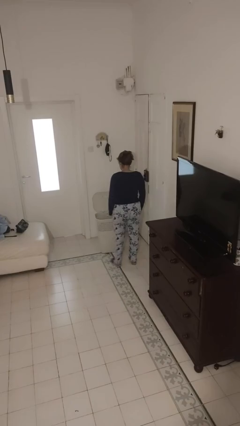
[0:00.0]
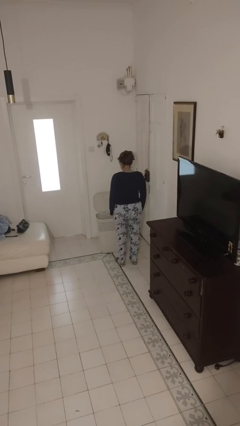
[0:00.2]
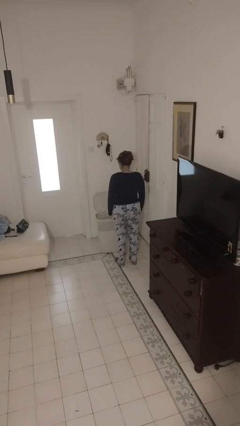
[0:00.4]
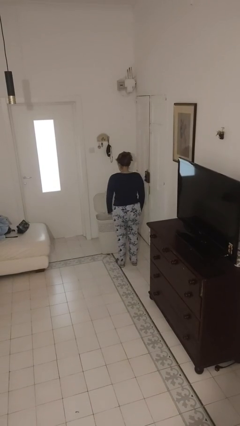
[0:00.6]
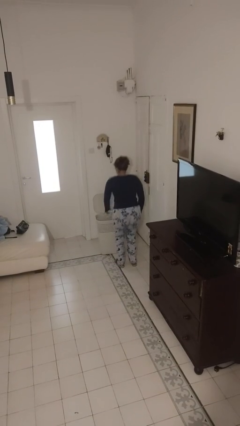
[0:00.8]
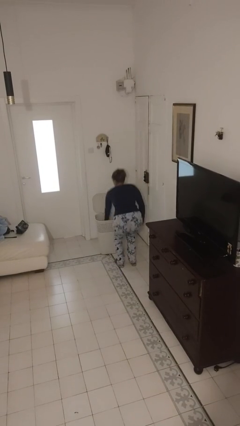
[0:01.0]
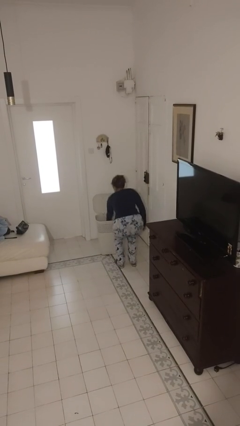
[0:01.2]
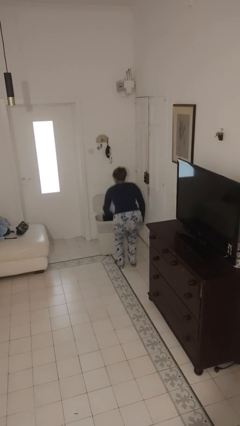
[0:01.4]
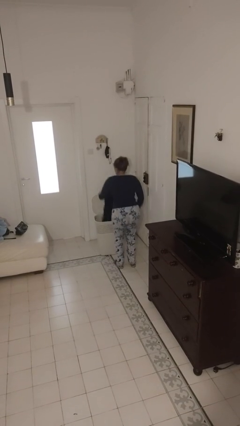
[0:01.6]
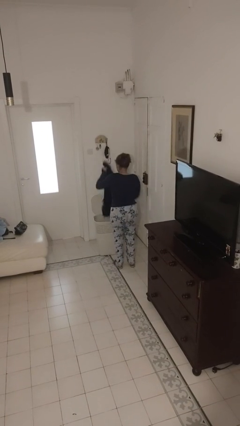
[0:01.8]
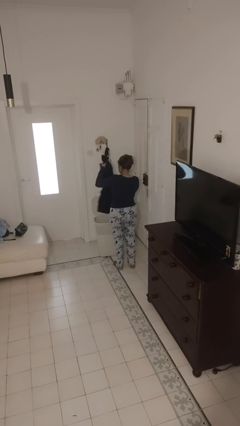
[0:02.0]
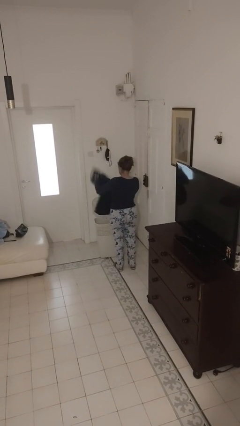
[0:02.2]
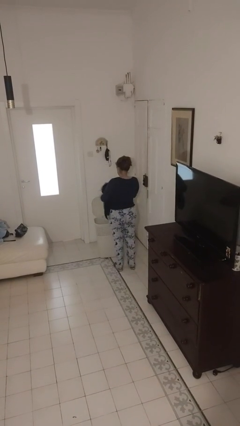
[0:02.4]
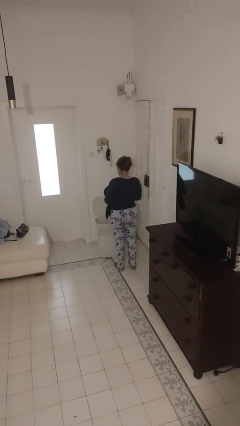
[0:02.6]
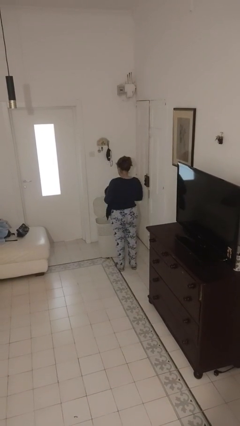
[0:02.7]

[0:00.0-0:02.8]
person takes object from basket

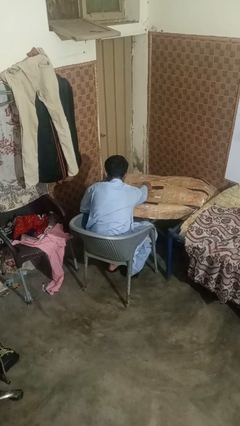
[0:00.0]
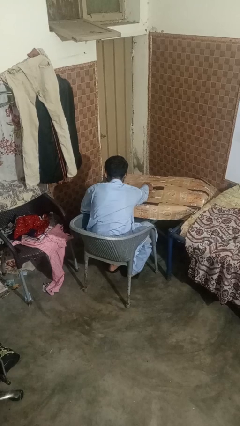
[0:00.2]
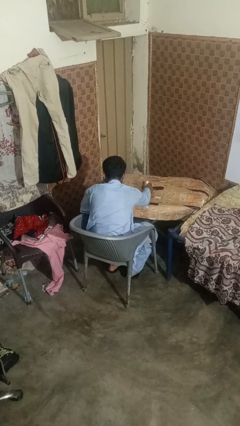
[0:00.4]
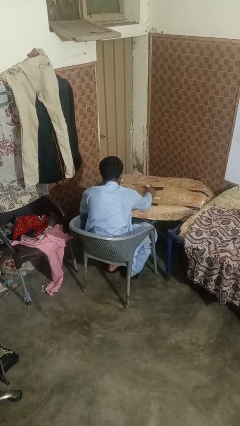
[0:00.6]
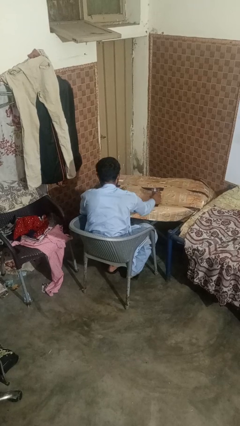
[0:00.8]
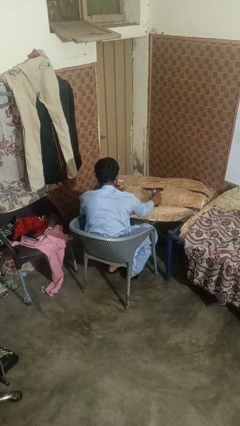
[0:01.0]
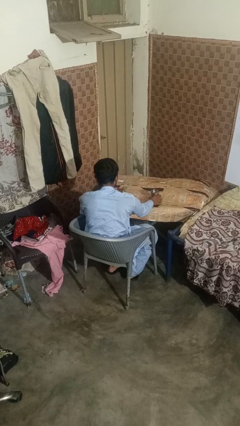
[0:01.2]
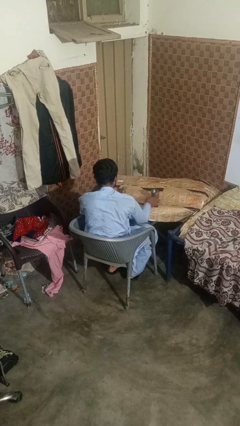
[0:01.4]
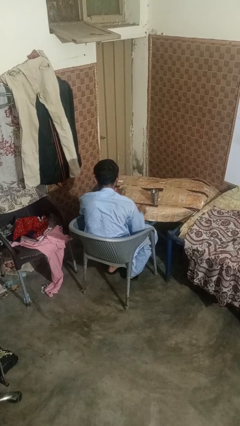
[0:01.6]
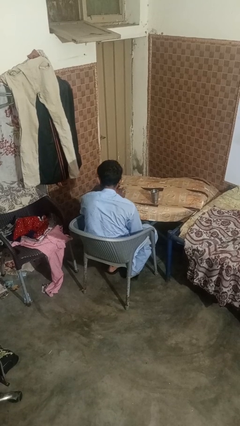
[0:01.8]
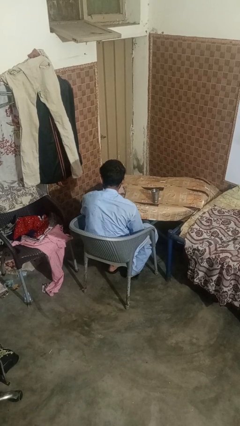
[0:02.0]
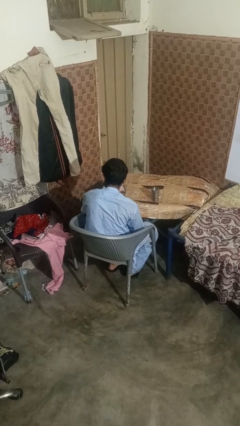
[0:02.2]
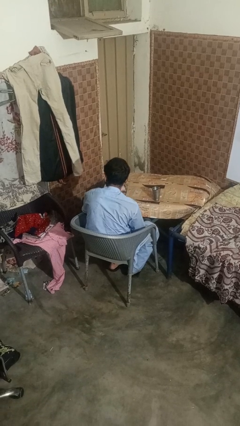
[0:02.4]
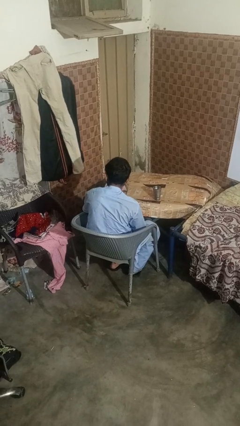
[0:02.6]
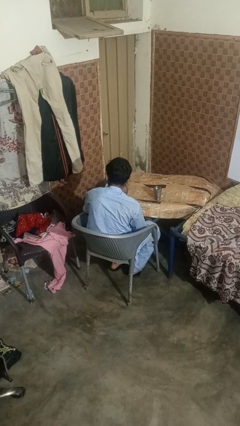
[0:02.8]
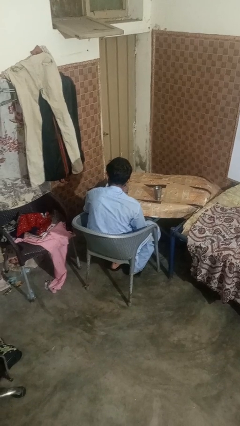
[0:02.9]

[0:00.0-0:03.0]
person sets upright glass

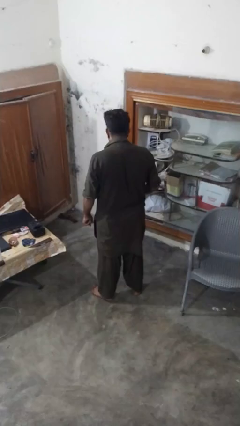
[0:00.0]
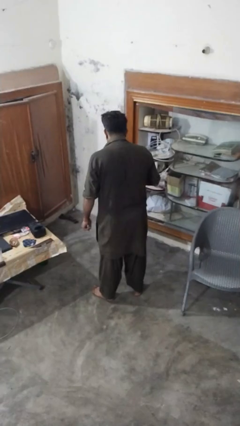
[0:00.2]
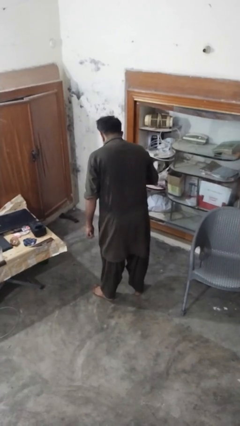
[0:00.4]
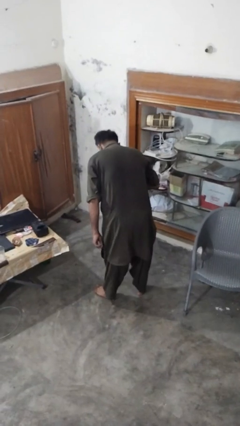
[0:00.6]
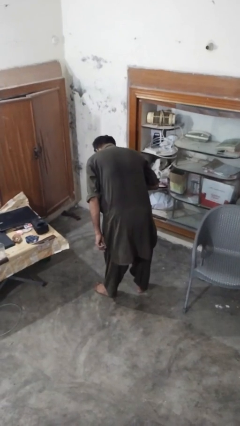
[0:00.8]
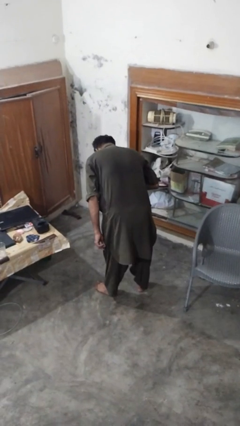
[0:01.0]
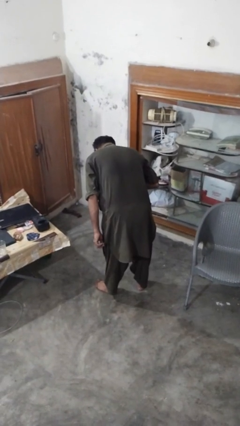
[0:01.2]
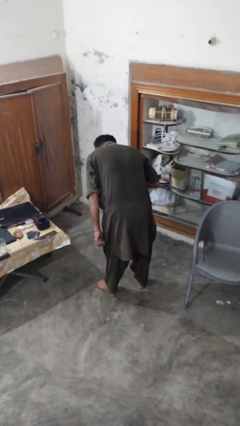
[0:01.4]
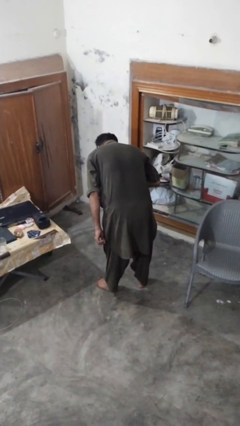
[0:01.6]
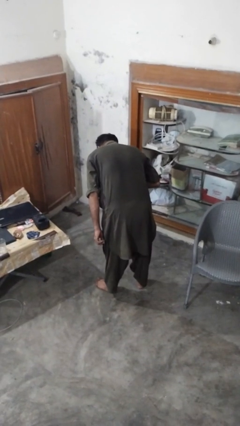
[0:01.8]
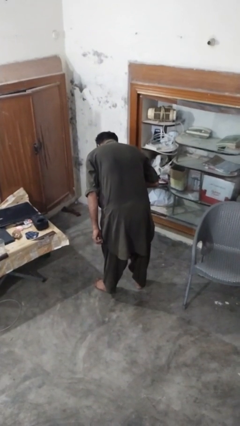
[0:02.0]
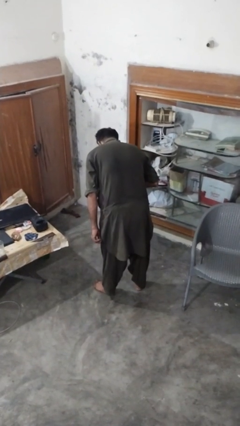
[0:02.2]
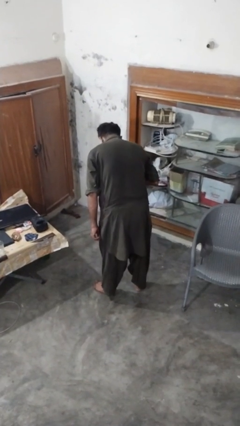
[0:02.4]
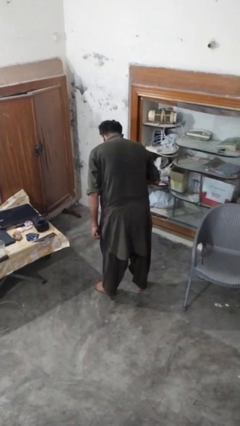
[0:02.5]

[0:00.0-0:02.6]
person bows

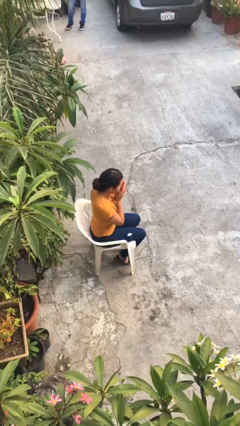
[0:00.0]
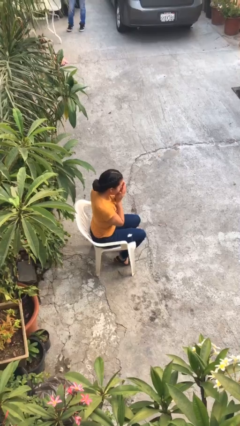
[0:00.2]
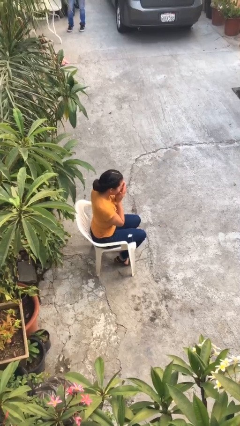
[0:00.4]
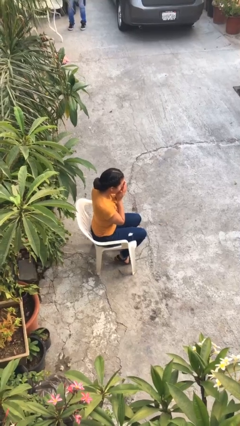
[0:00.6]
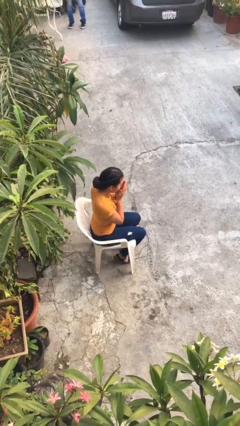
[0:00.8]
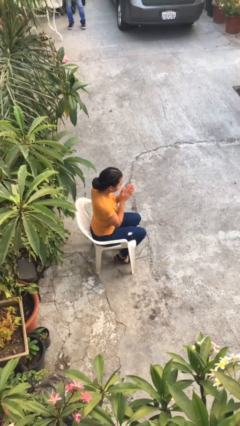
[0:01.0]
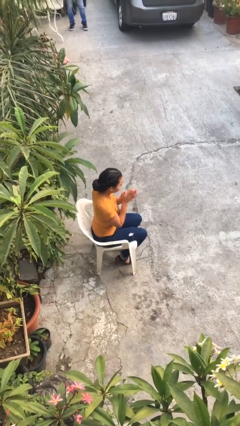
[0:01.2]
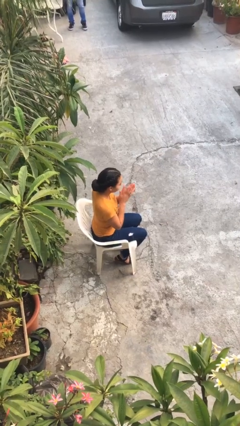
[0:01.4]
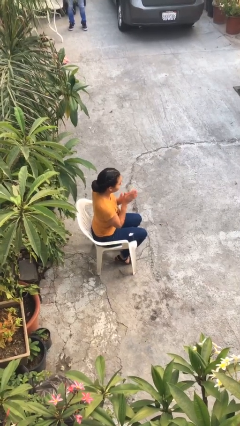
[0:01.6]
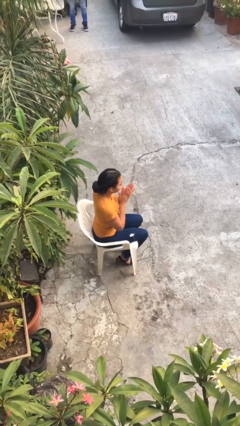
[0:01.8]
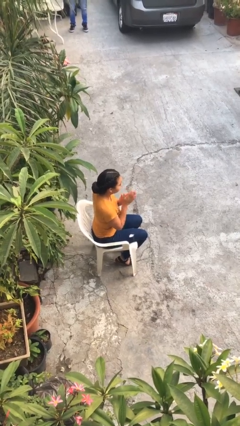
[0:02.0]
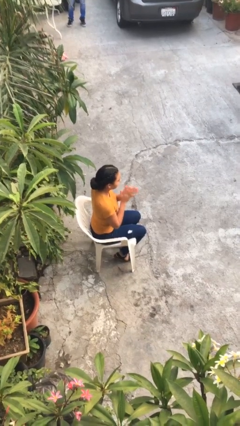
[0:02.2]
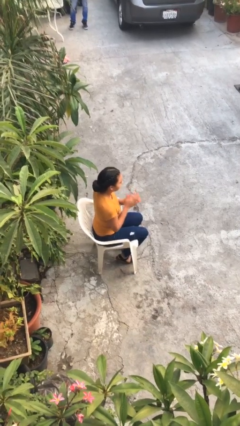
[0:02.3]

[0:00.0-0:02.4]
person blows into hands

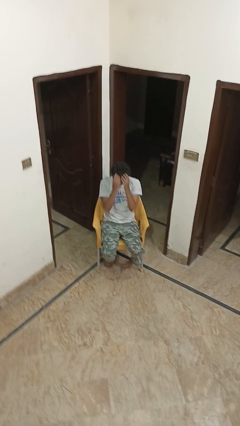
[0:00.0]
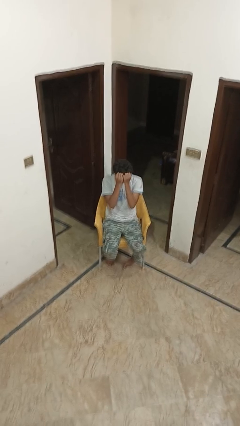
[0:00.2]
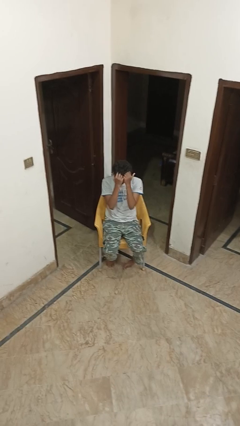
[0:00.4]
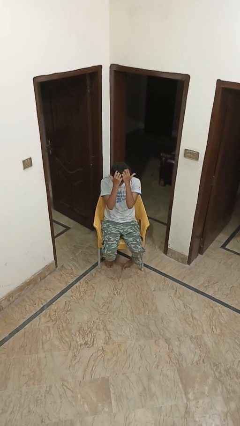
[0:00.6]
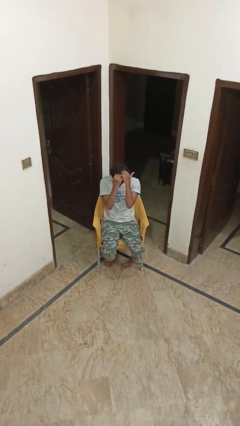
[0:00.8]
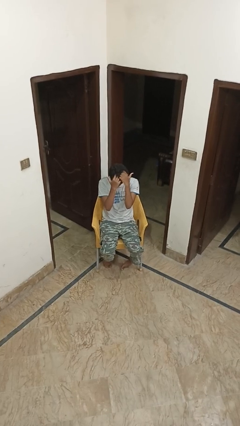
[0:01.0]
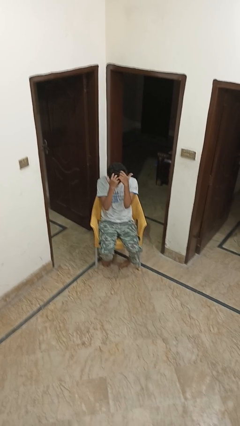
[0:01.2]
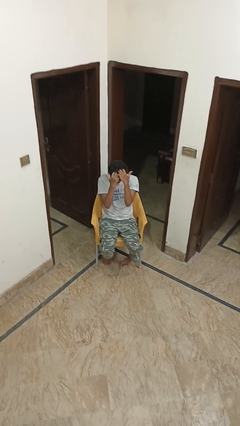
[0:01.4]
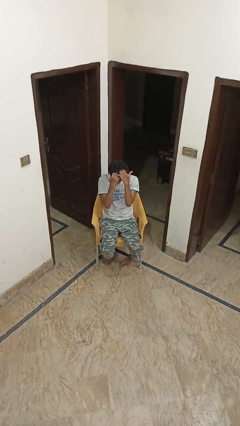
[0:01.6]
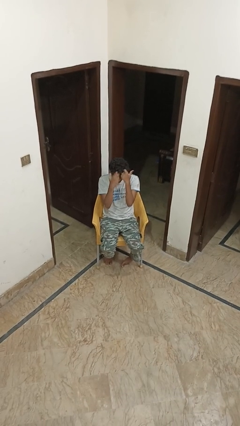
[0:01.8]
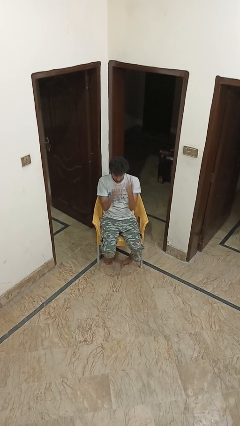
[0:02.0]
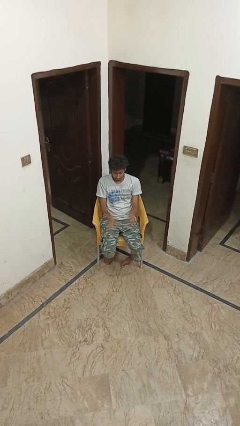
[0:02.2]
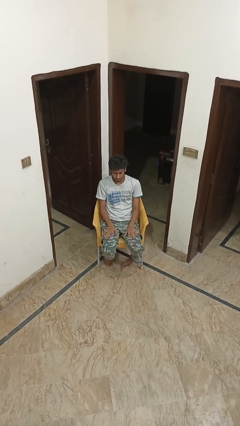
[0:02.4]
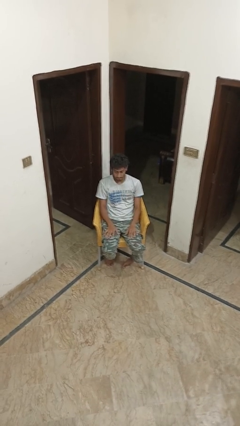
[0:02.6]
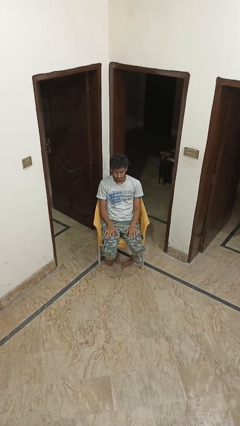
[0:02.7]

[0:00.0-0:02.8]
person scratches face

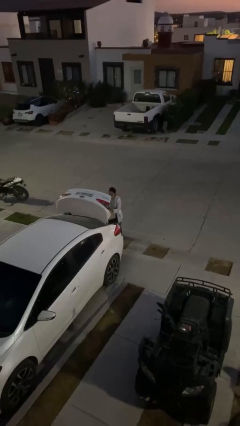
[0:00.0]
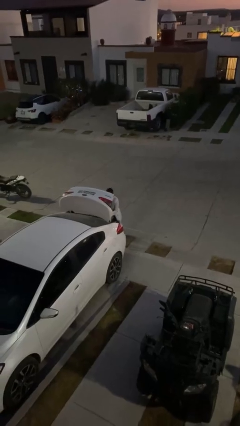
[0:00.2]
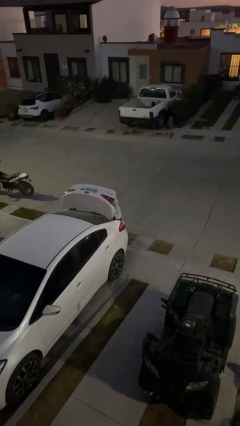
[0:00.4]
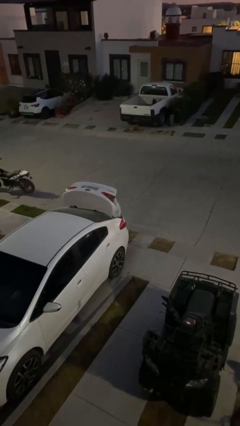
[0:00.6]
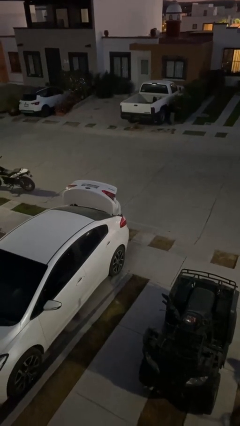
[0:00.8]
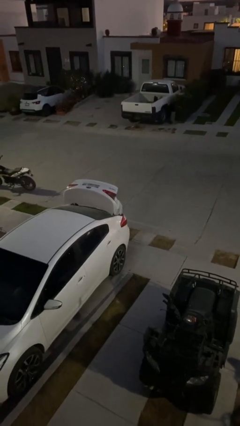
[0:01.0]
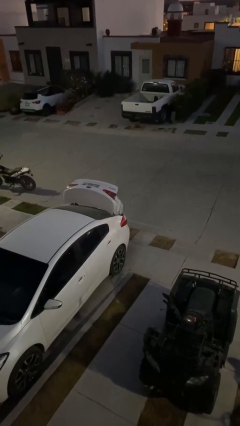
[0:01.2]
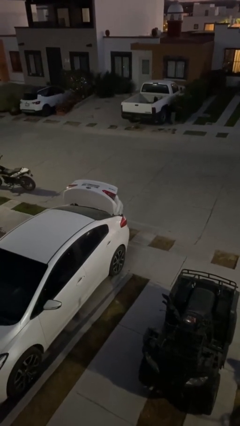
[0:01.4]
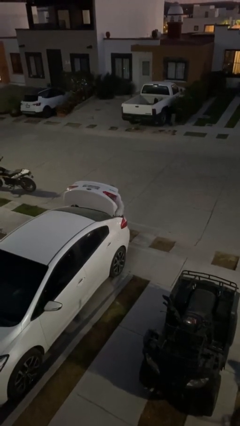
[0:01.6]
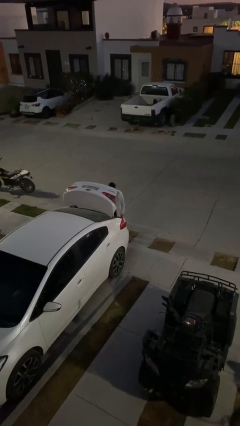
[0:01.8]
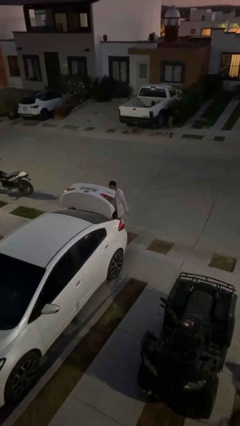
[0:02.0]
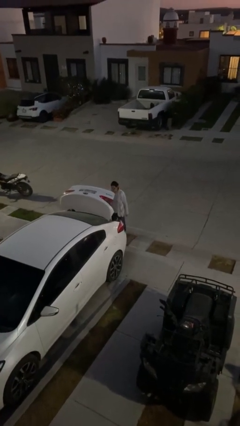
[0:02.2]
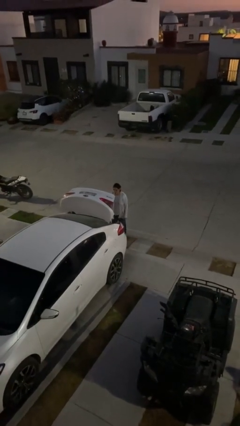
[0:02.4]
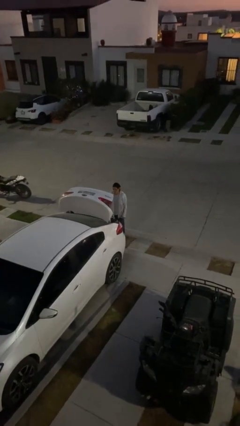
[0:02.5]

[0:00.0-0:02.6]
person loads car

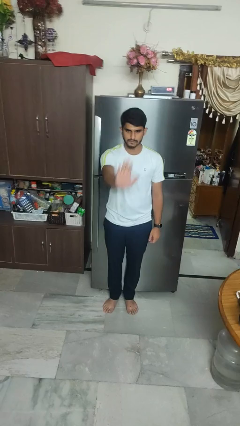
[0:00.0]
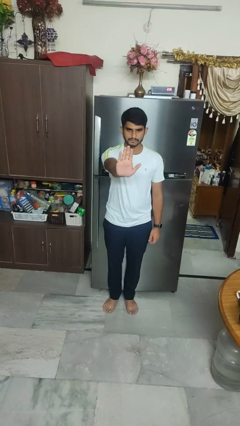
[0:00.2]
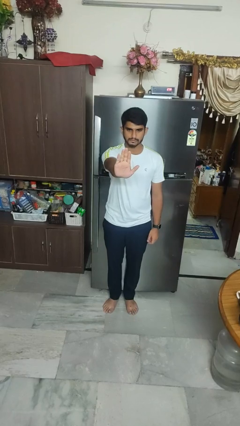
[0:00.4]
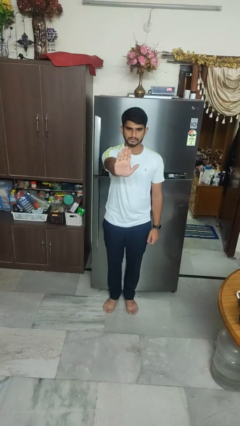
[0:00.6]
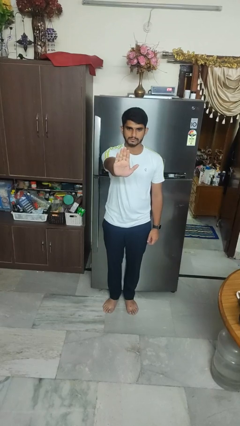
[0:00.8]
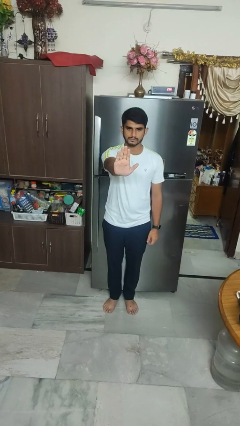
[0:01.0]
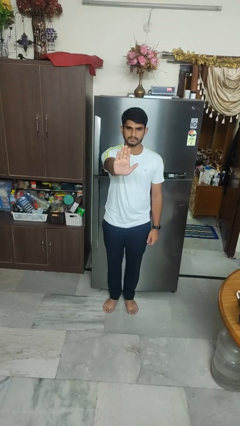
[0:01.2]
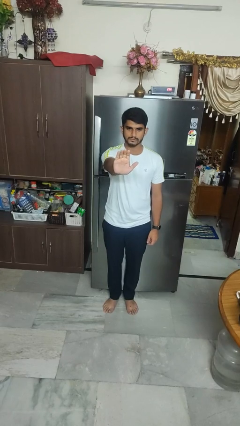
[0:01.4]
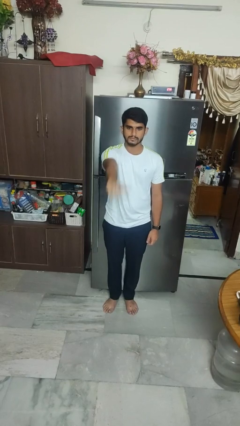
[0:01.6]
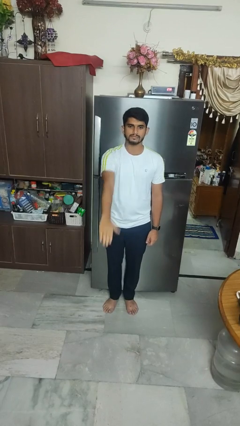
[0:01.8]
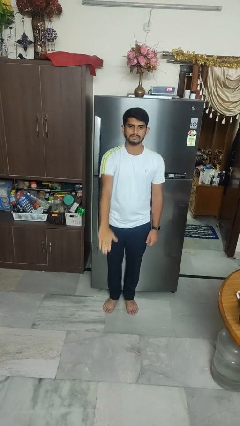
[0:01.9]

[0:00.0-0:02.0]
person gestures stop
